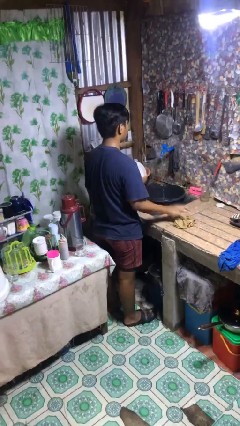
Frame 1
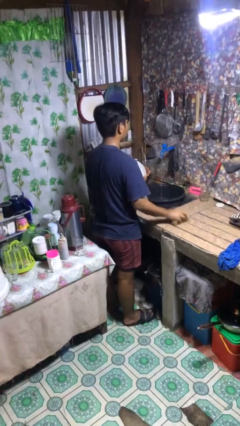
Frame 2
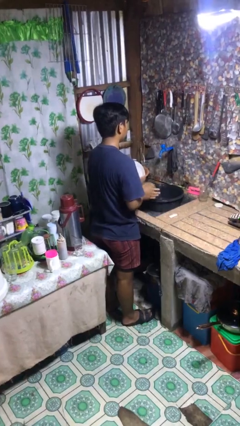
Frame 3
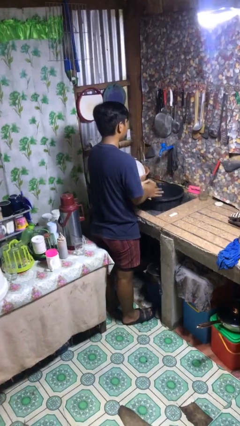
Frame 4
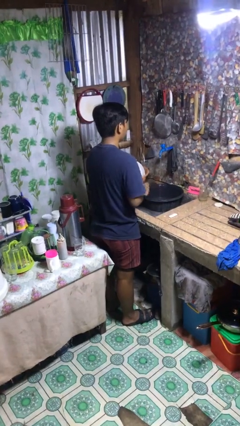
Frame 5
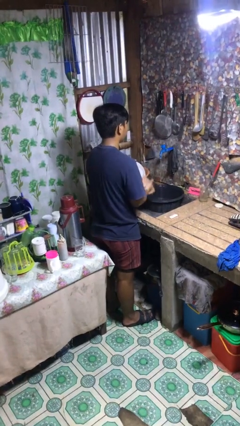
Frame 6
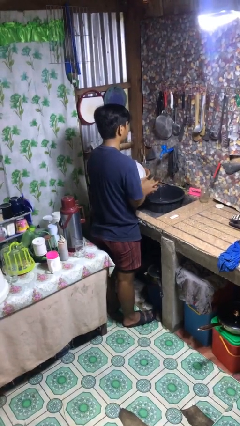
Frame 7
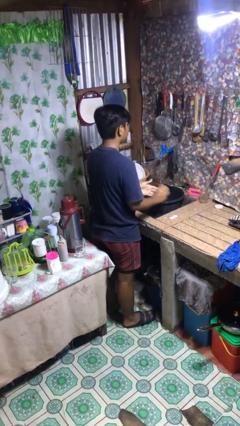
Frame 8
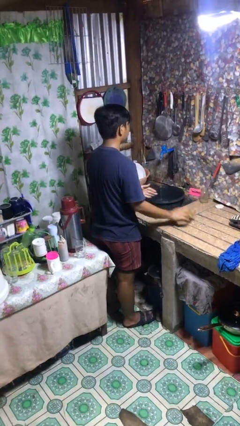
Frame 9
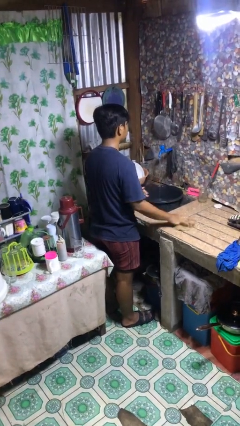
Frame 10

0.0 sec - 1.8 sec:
person dries hands with towel

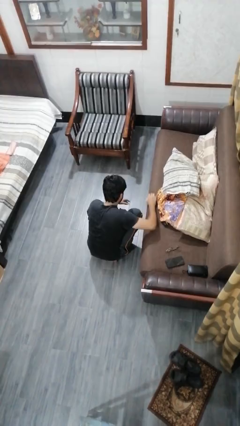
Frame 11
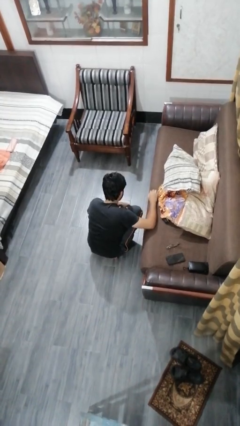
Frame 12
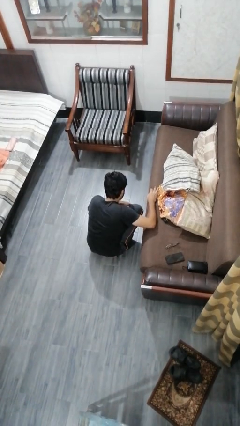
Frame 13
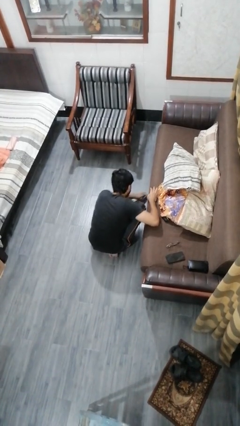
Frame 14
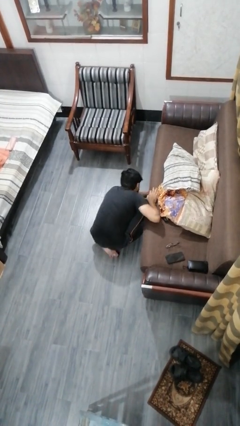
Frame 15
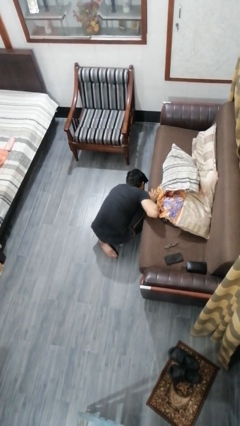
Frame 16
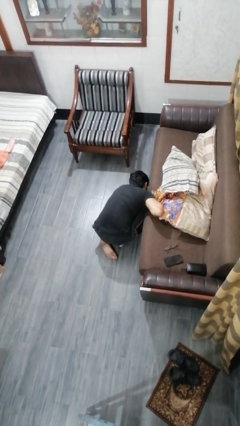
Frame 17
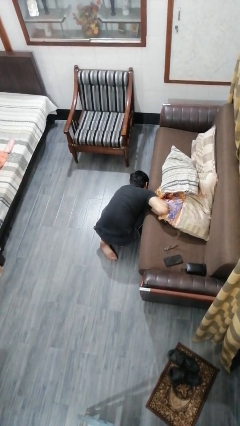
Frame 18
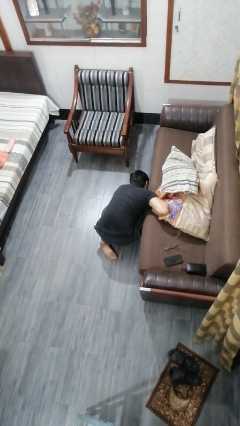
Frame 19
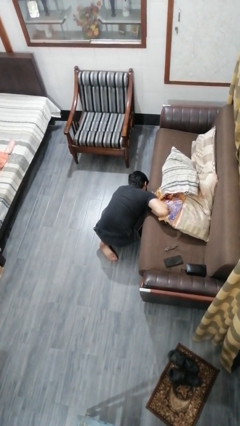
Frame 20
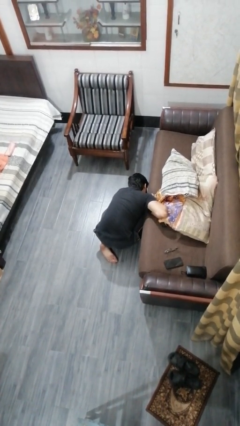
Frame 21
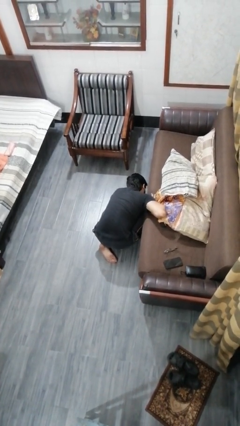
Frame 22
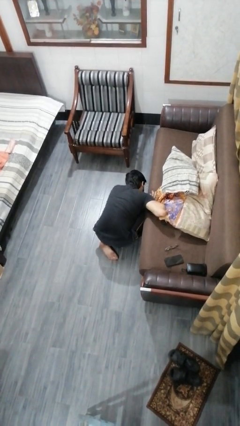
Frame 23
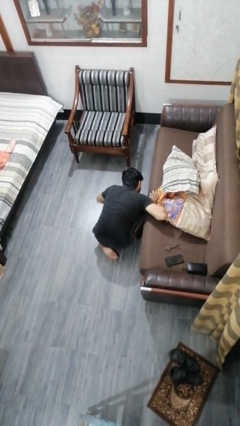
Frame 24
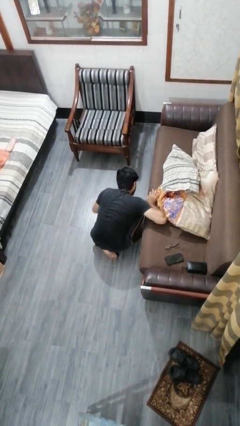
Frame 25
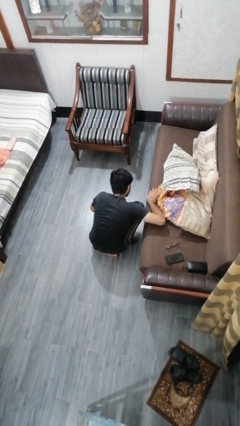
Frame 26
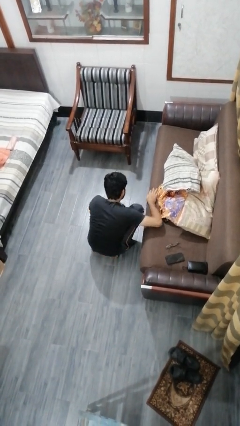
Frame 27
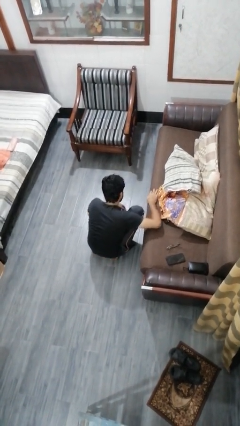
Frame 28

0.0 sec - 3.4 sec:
person searches under couch

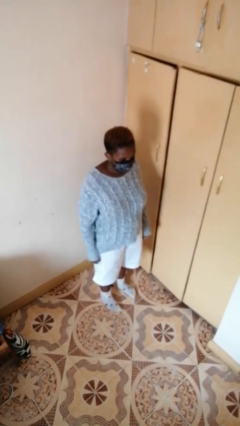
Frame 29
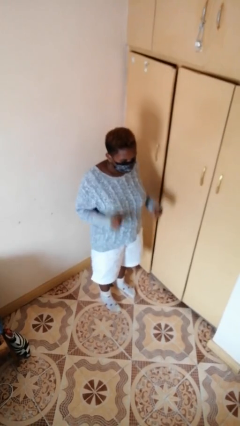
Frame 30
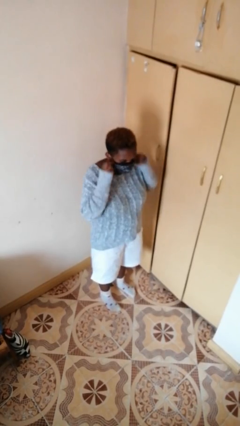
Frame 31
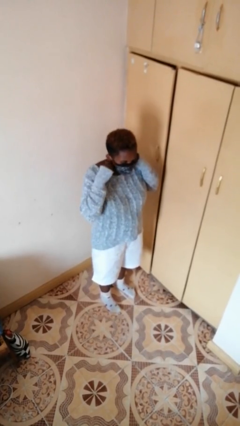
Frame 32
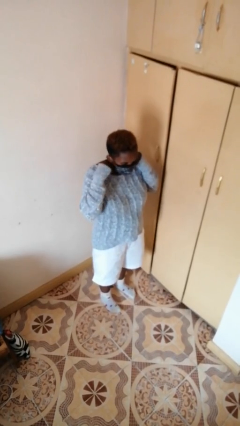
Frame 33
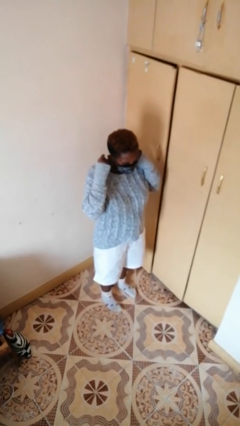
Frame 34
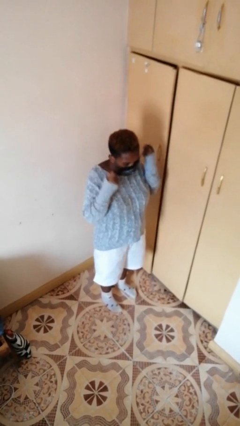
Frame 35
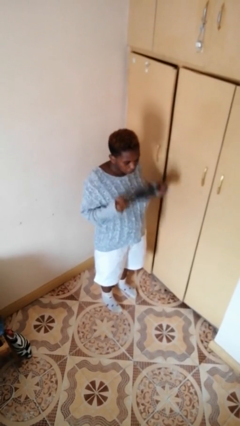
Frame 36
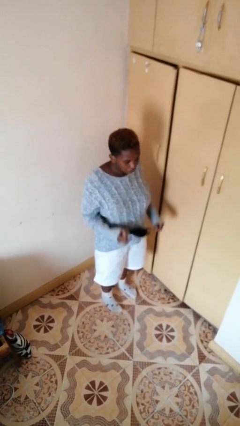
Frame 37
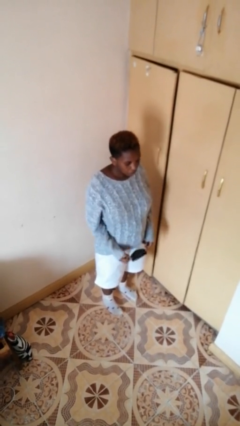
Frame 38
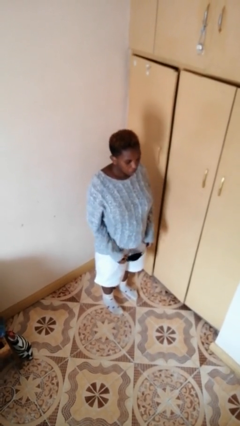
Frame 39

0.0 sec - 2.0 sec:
person takes off facemask

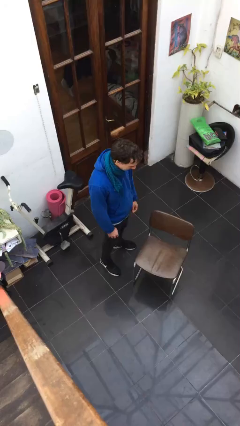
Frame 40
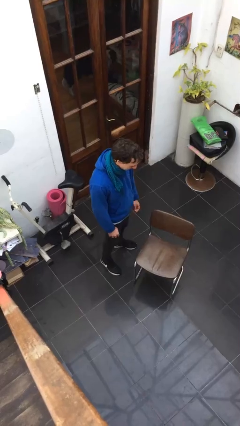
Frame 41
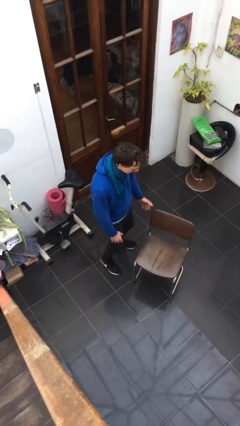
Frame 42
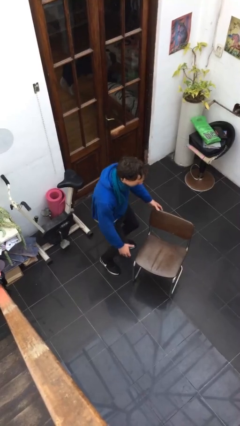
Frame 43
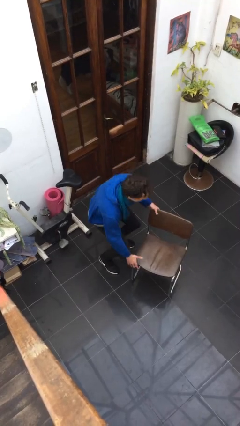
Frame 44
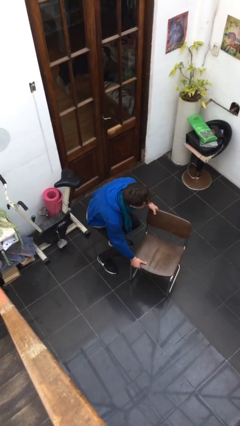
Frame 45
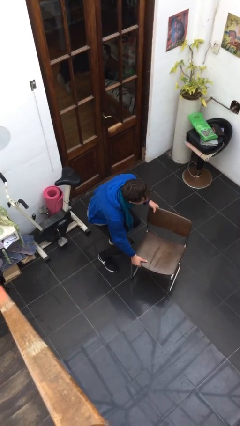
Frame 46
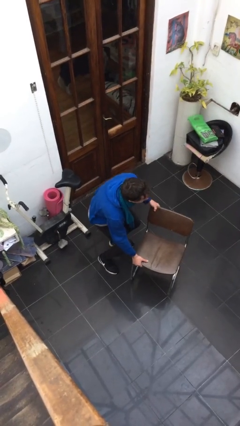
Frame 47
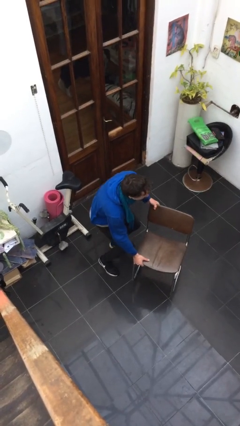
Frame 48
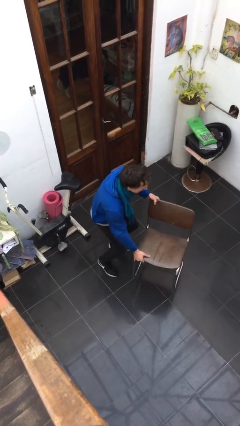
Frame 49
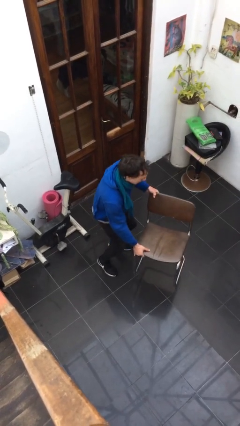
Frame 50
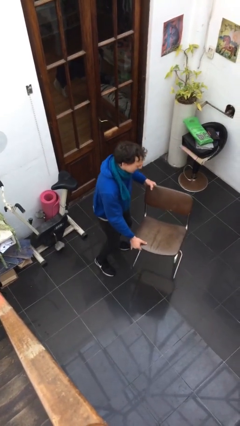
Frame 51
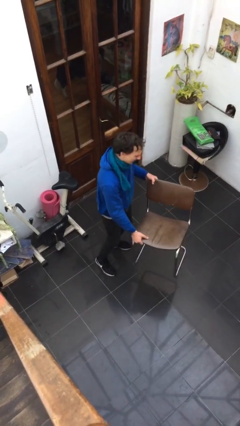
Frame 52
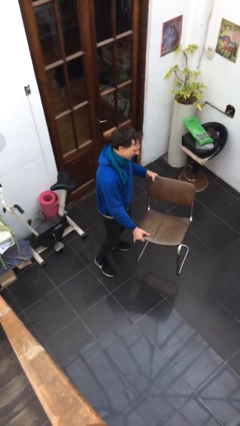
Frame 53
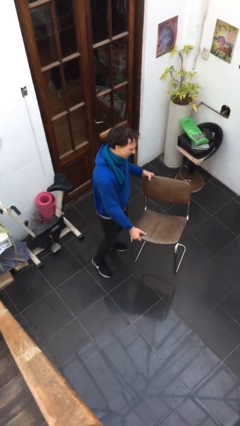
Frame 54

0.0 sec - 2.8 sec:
person picks up object from floor

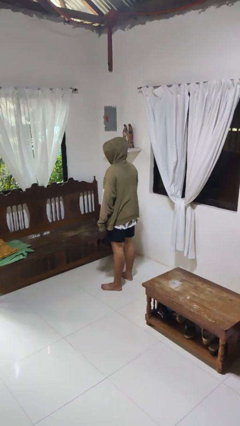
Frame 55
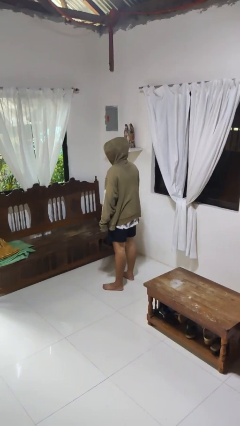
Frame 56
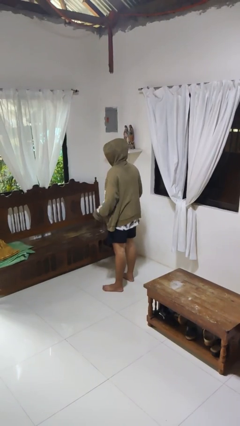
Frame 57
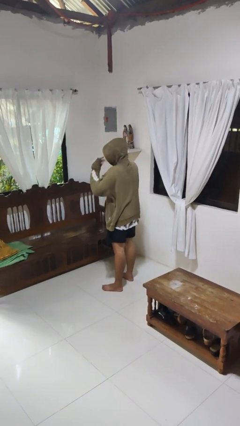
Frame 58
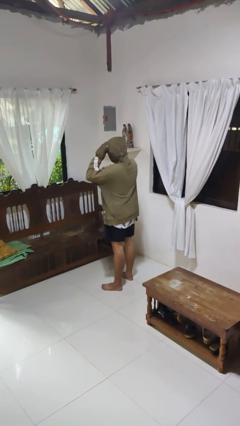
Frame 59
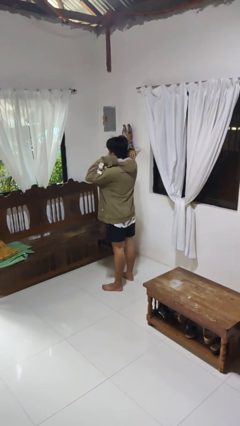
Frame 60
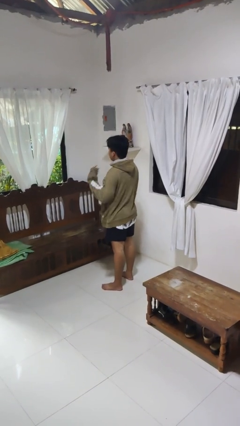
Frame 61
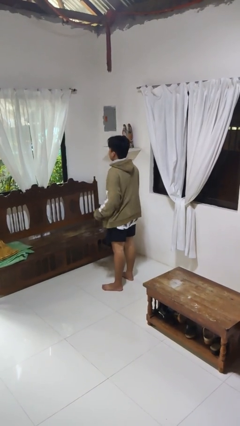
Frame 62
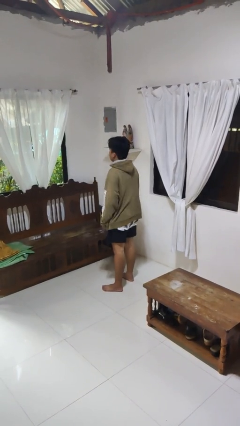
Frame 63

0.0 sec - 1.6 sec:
person takes off hoodie

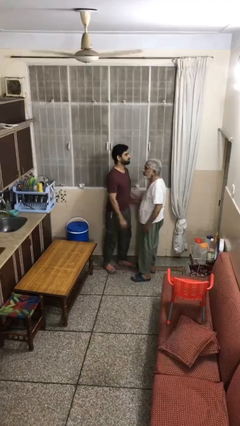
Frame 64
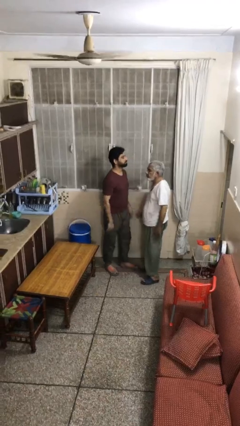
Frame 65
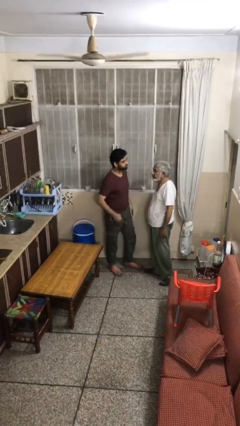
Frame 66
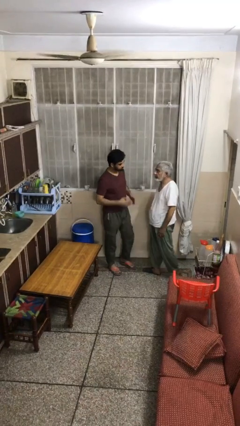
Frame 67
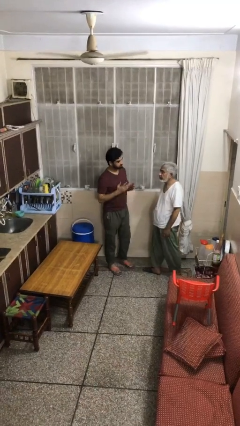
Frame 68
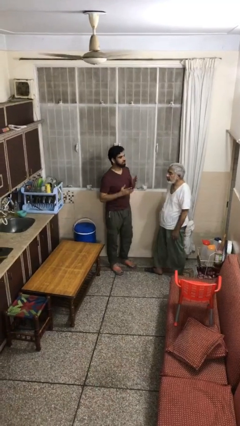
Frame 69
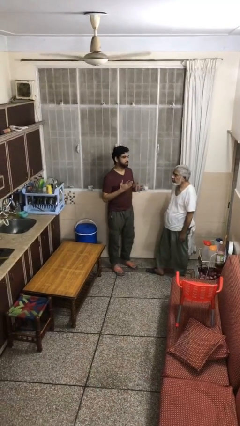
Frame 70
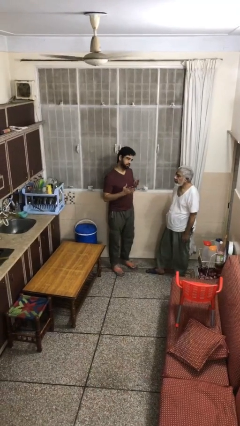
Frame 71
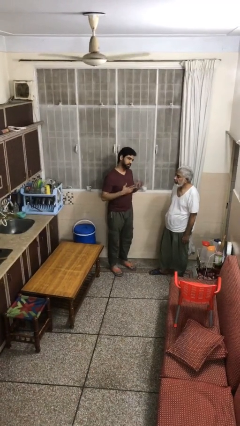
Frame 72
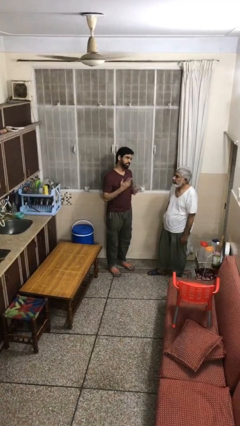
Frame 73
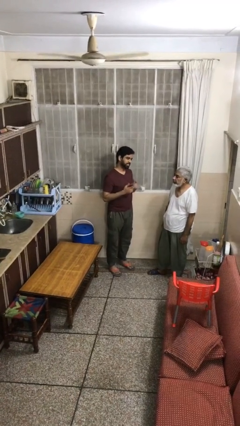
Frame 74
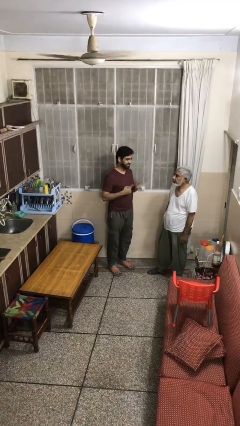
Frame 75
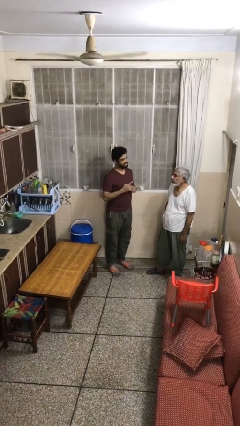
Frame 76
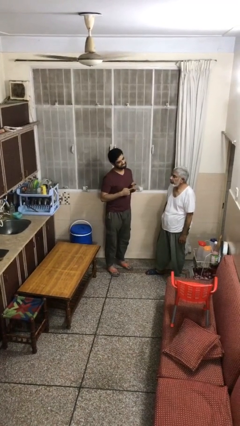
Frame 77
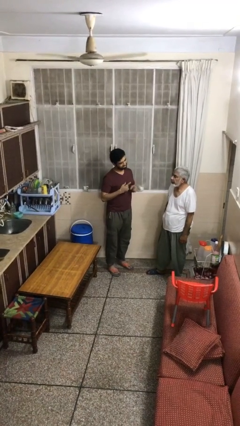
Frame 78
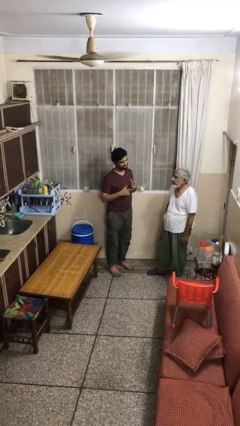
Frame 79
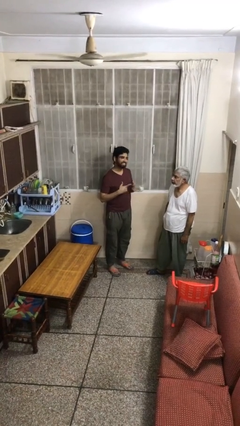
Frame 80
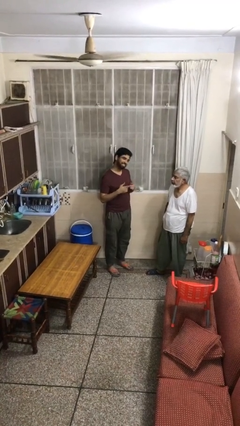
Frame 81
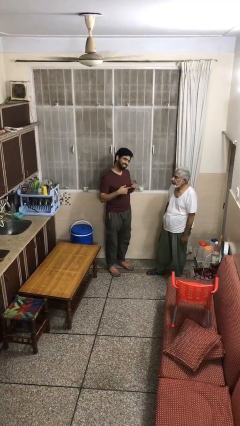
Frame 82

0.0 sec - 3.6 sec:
person talks to person

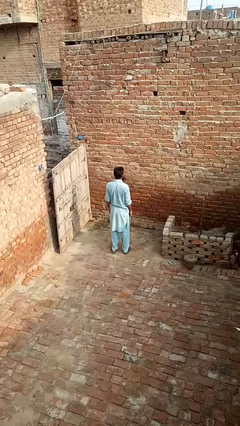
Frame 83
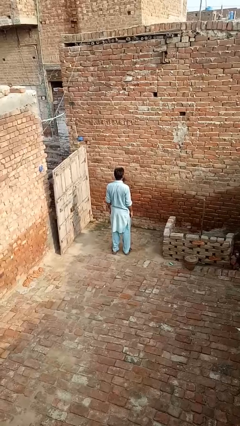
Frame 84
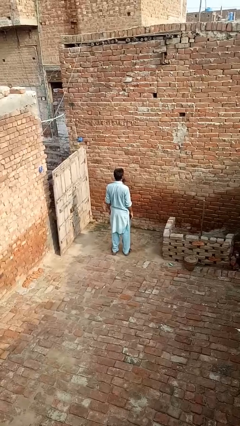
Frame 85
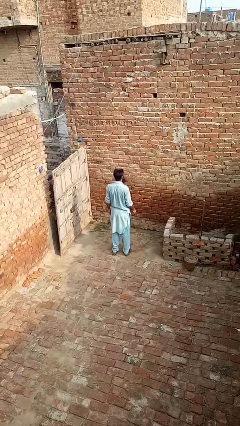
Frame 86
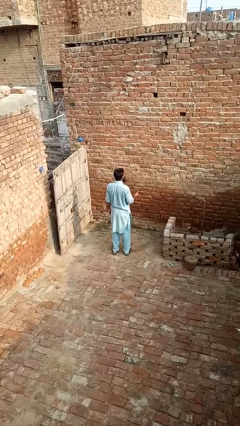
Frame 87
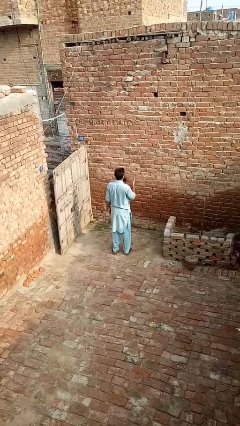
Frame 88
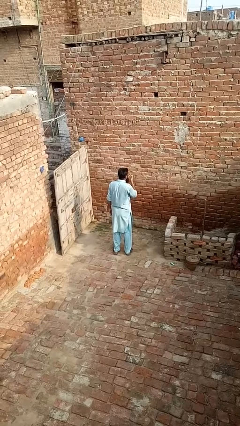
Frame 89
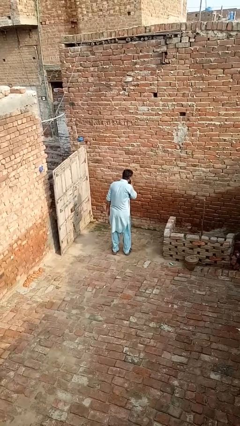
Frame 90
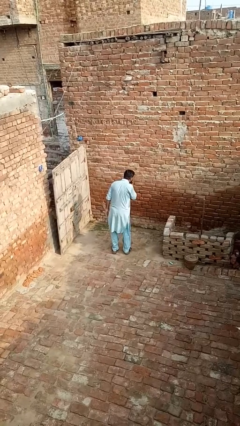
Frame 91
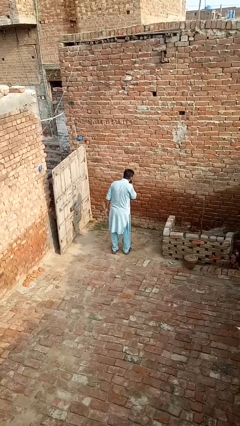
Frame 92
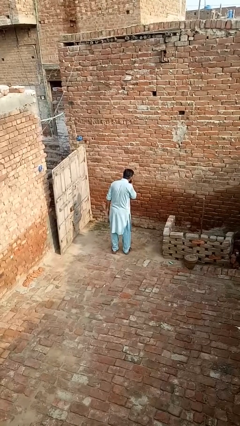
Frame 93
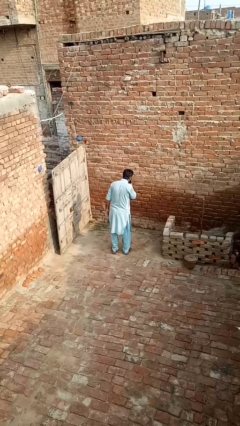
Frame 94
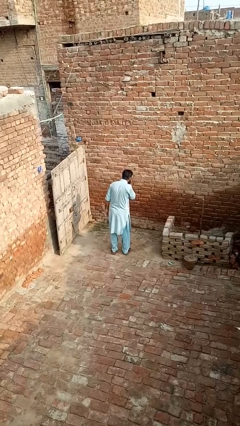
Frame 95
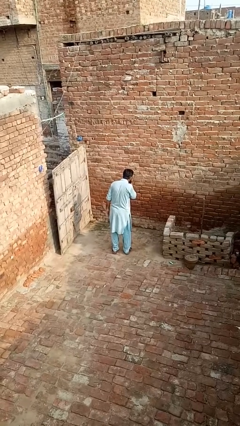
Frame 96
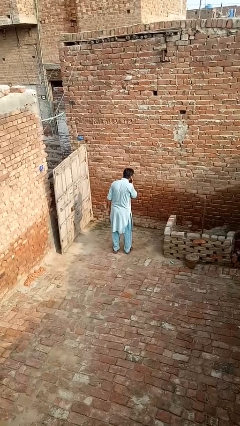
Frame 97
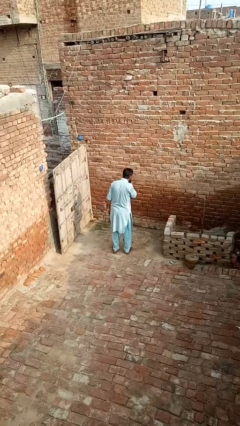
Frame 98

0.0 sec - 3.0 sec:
person sneezes into hand
